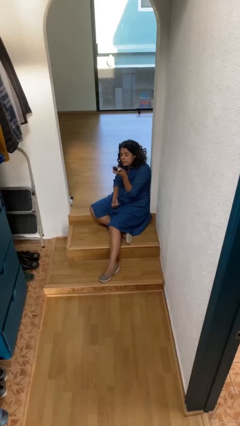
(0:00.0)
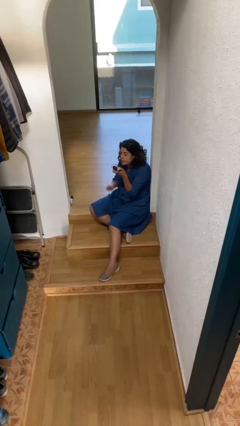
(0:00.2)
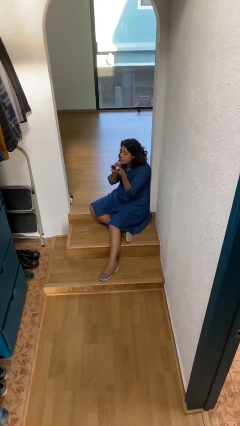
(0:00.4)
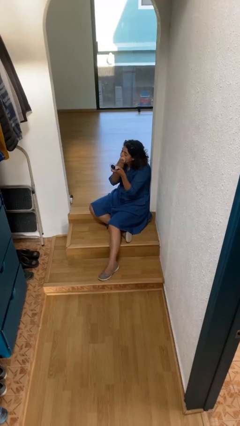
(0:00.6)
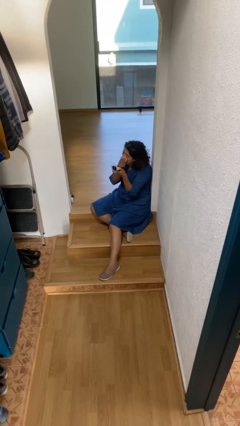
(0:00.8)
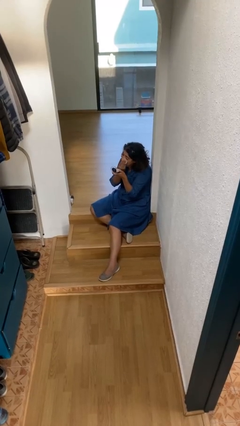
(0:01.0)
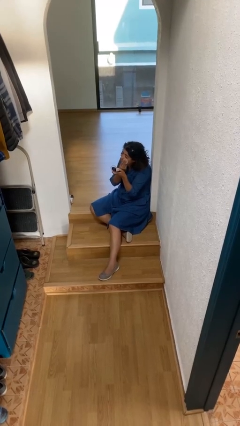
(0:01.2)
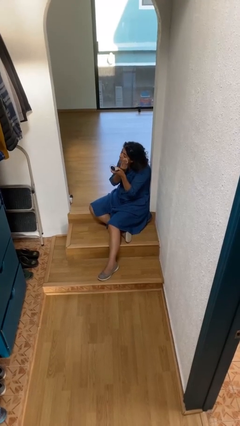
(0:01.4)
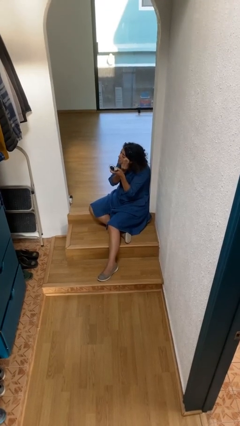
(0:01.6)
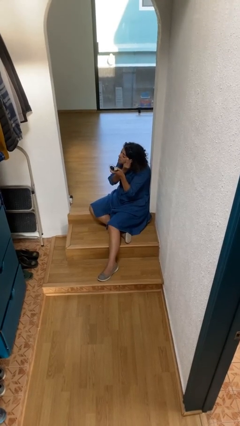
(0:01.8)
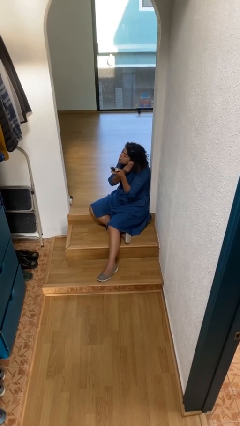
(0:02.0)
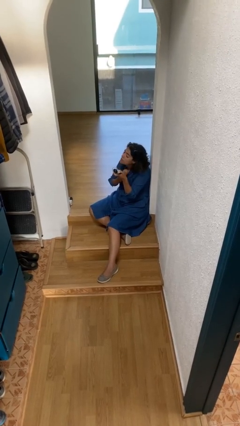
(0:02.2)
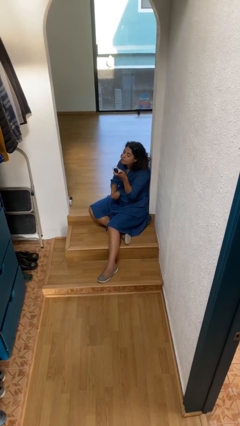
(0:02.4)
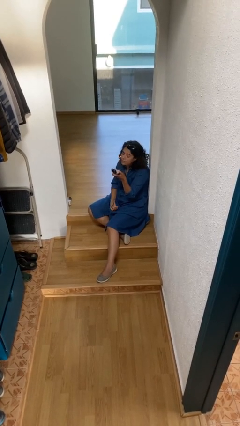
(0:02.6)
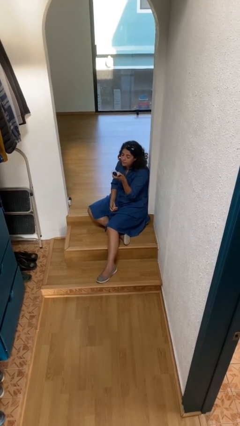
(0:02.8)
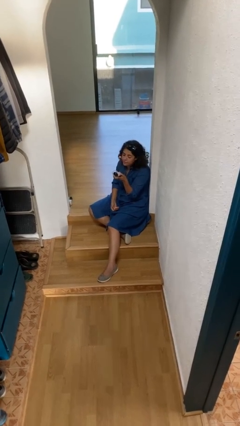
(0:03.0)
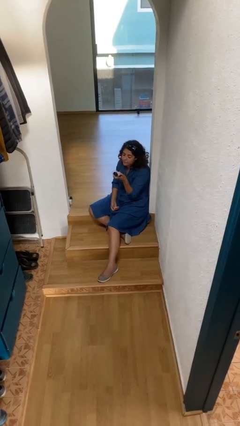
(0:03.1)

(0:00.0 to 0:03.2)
person applies foundation makeup

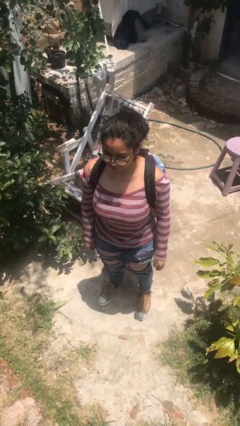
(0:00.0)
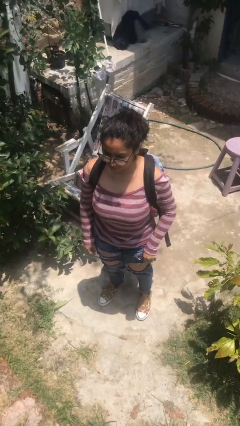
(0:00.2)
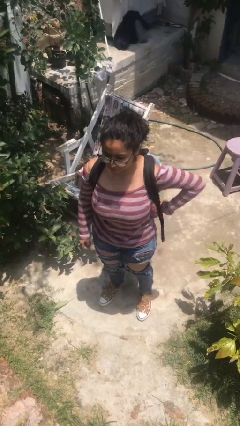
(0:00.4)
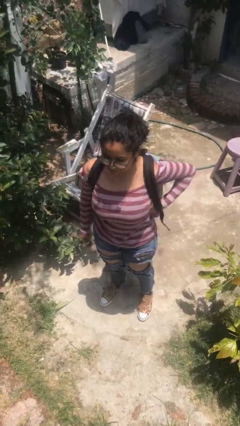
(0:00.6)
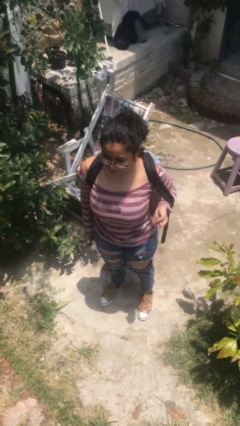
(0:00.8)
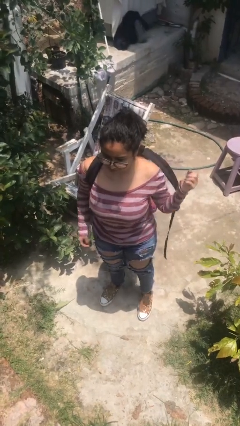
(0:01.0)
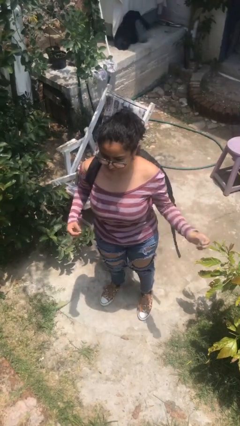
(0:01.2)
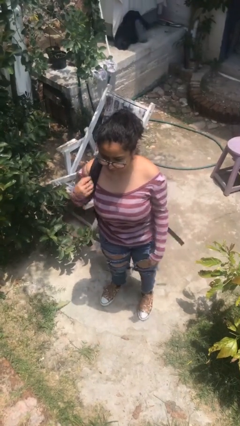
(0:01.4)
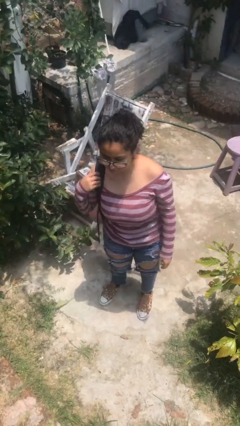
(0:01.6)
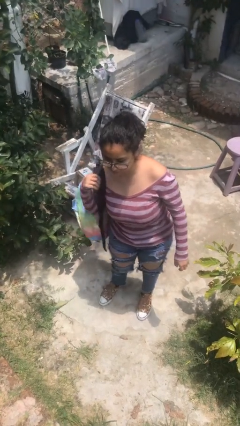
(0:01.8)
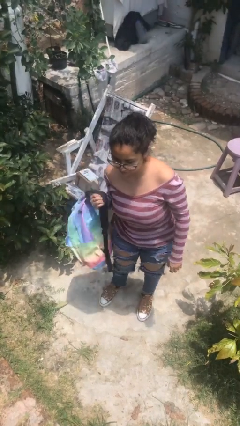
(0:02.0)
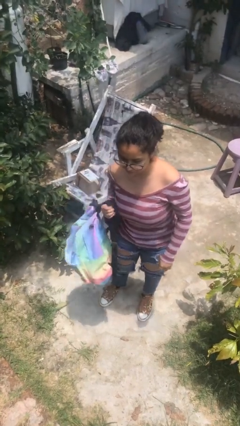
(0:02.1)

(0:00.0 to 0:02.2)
person takes off backpack

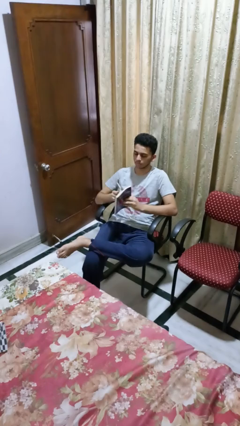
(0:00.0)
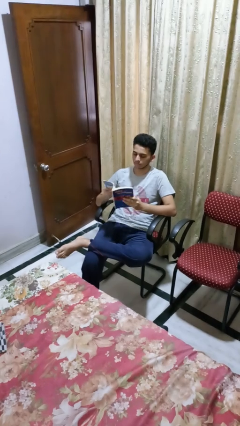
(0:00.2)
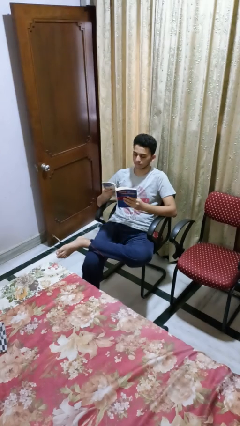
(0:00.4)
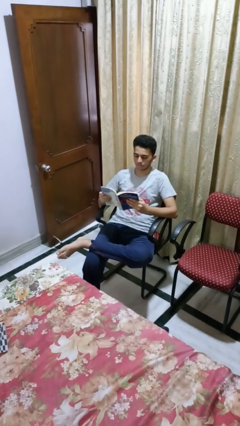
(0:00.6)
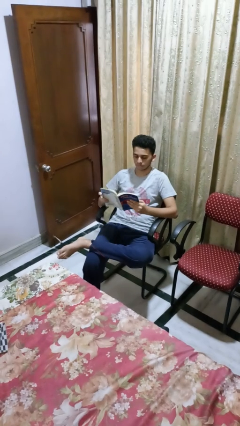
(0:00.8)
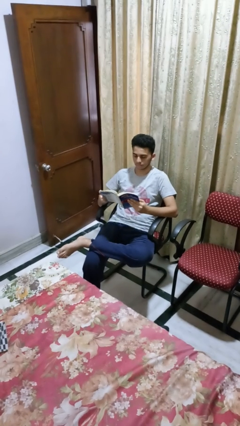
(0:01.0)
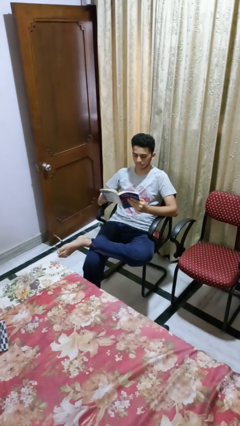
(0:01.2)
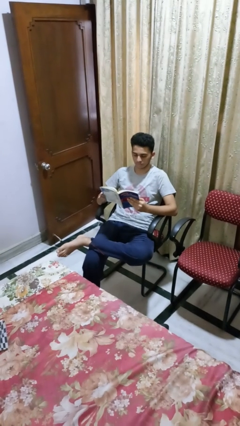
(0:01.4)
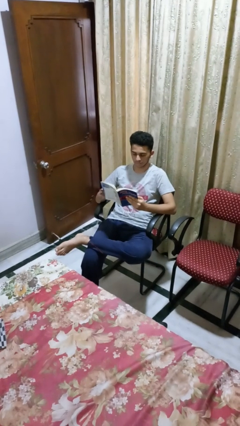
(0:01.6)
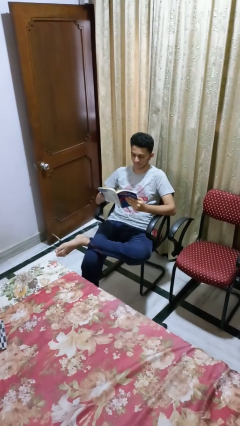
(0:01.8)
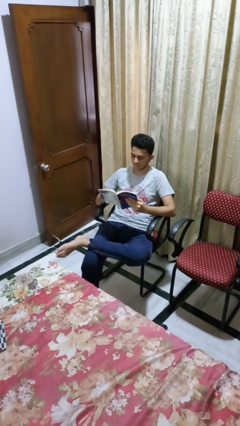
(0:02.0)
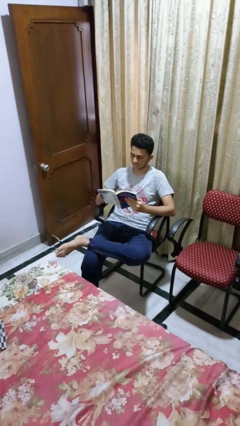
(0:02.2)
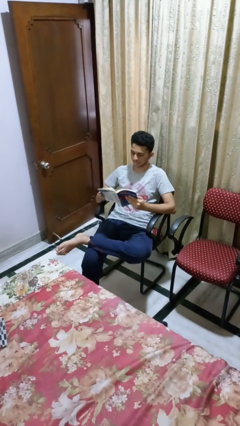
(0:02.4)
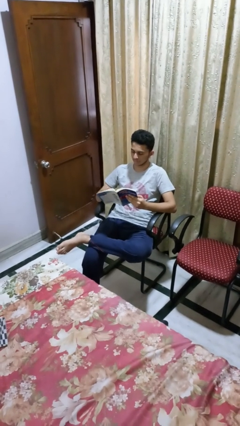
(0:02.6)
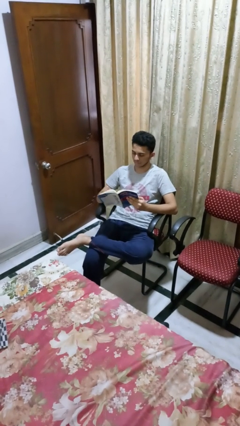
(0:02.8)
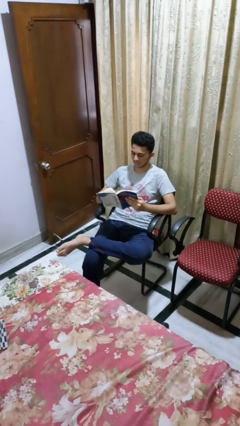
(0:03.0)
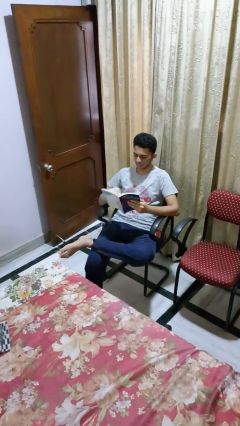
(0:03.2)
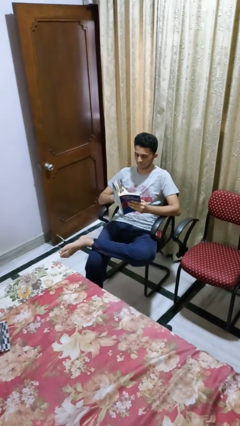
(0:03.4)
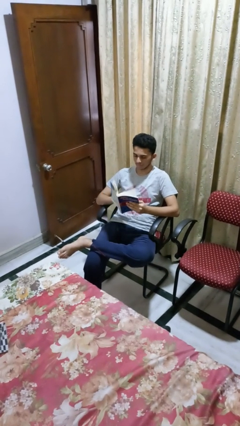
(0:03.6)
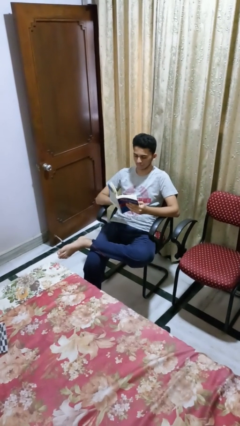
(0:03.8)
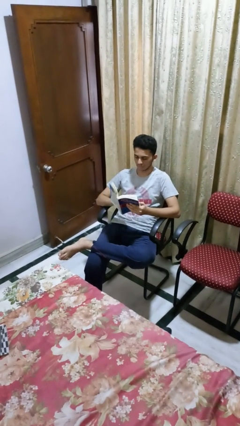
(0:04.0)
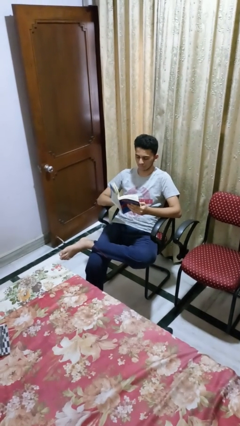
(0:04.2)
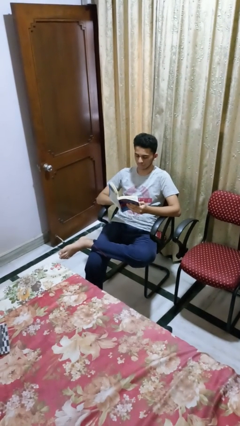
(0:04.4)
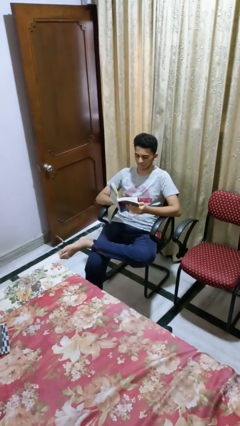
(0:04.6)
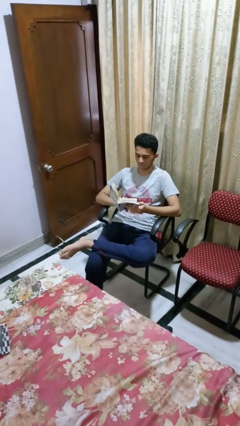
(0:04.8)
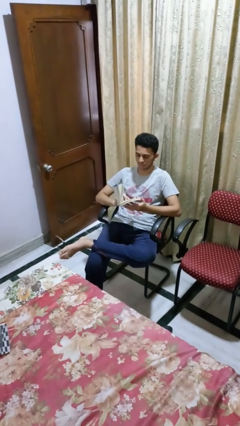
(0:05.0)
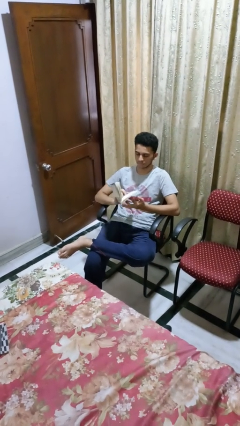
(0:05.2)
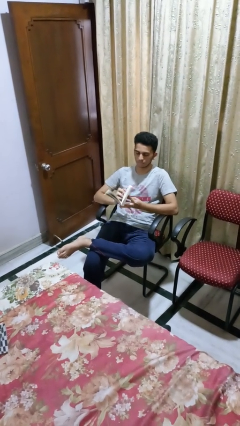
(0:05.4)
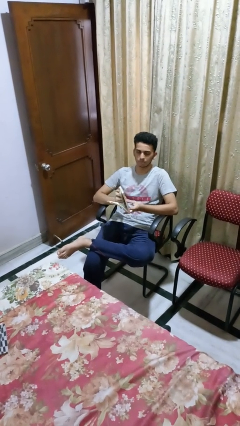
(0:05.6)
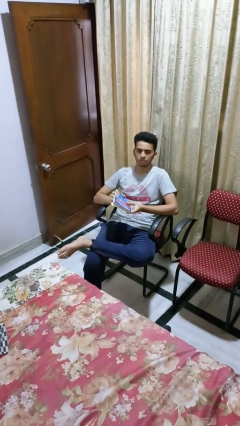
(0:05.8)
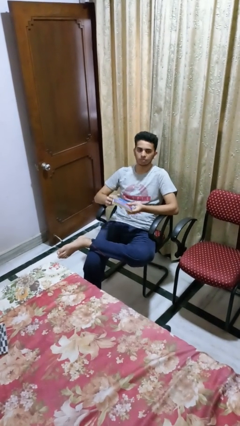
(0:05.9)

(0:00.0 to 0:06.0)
person reads book

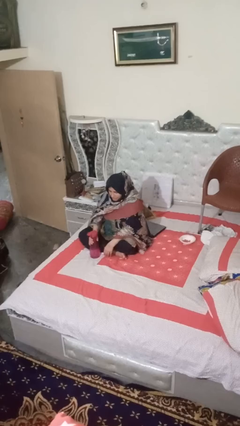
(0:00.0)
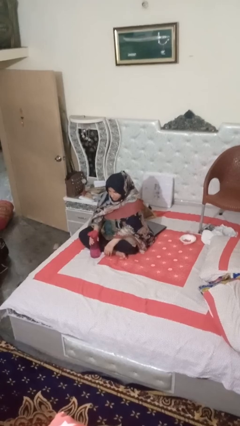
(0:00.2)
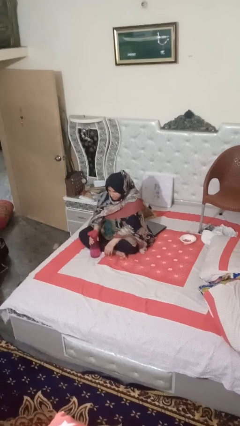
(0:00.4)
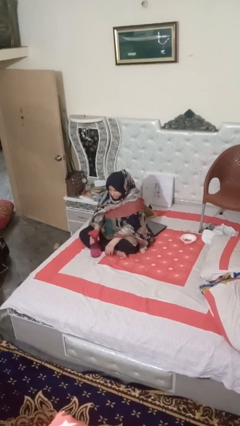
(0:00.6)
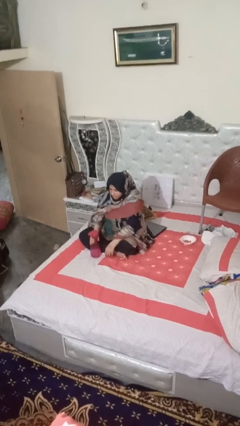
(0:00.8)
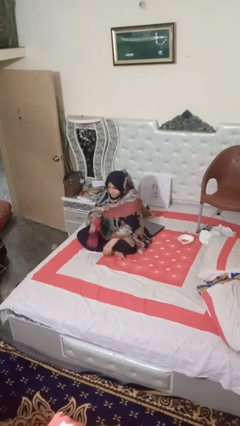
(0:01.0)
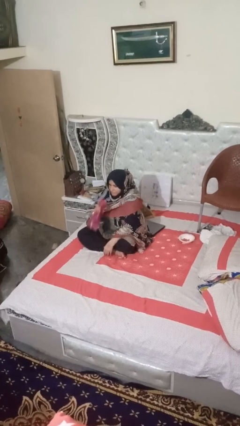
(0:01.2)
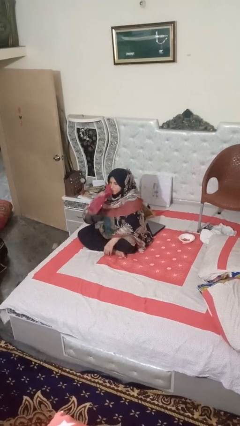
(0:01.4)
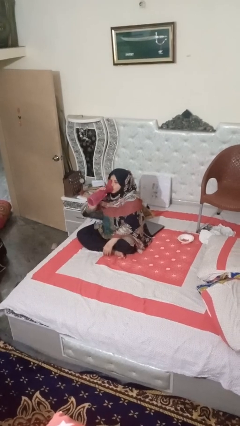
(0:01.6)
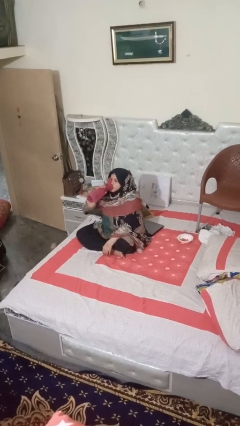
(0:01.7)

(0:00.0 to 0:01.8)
person drinks from bottle

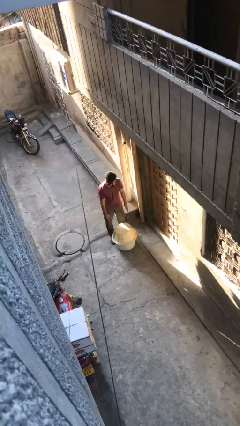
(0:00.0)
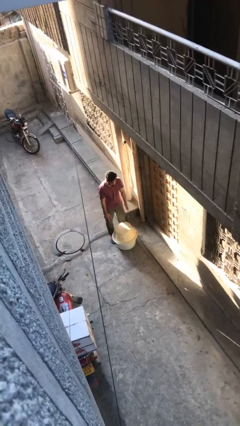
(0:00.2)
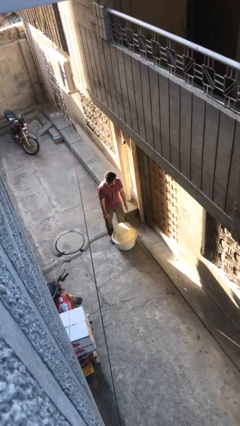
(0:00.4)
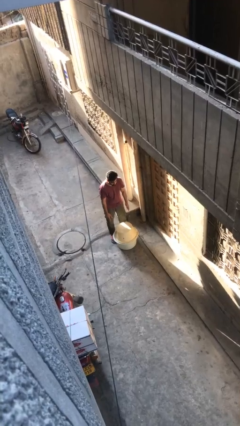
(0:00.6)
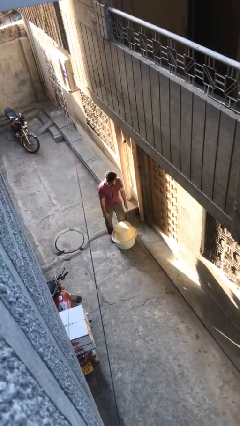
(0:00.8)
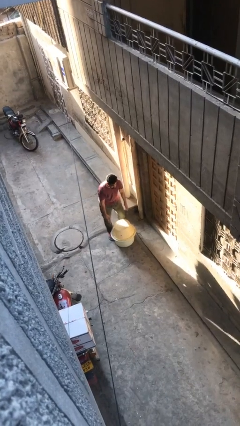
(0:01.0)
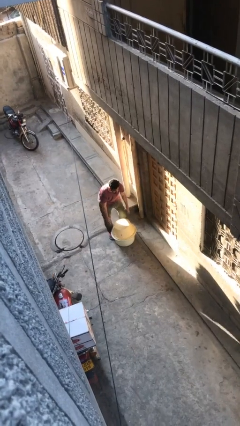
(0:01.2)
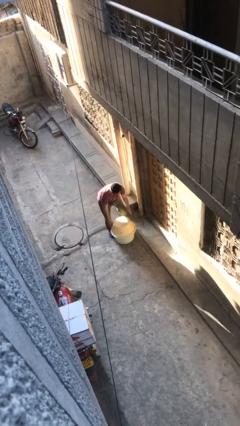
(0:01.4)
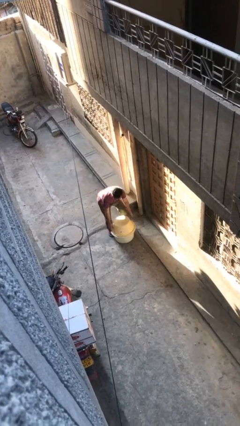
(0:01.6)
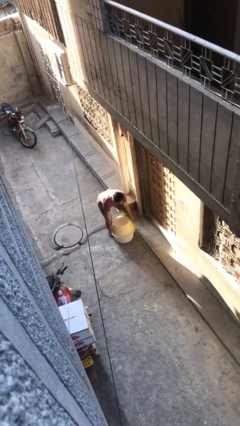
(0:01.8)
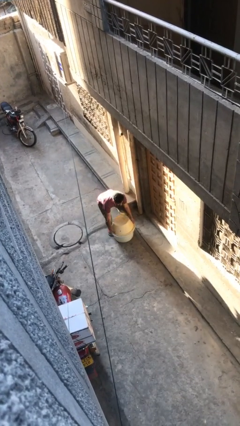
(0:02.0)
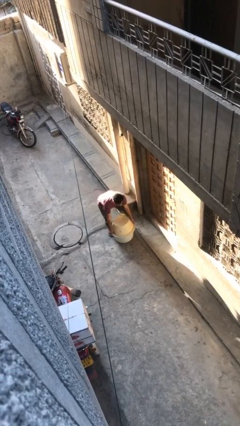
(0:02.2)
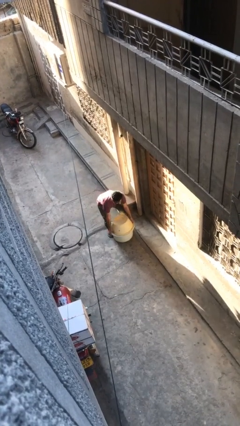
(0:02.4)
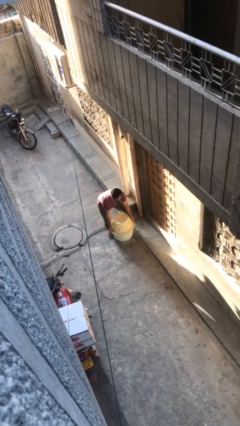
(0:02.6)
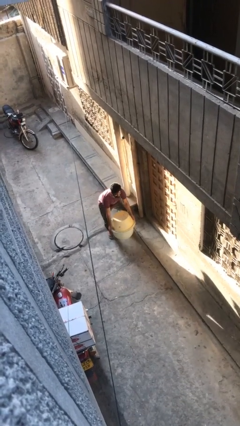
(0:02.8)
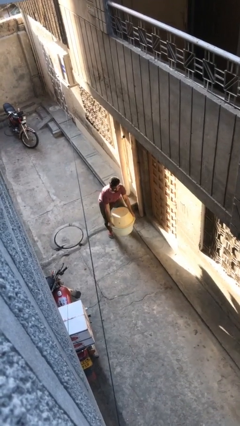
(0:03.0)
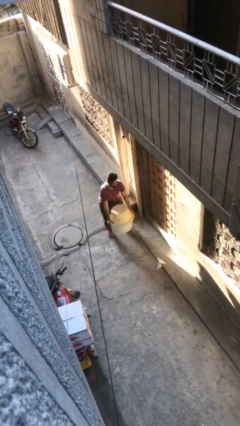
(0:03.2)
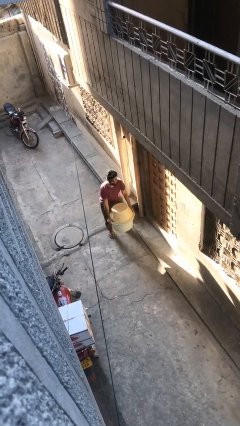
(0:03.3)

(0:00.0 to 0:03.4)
person picks up object from floor

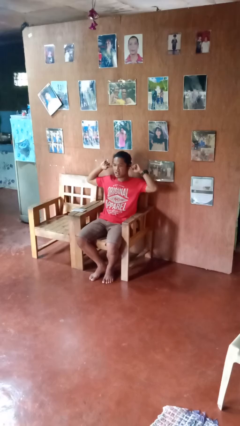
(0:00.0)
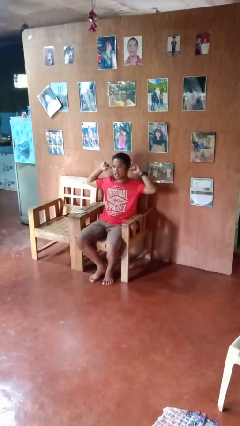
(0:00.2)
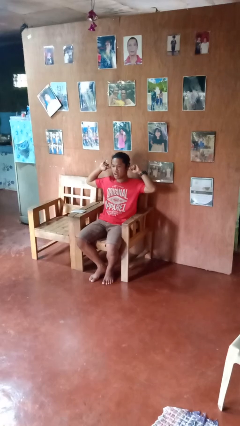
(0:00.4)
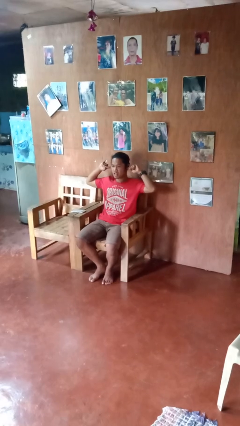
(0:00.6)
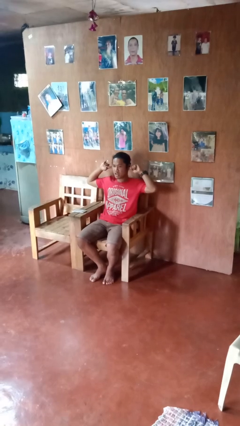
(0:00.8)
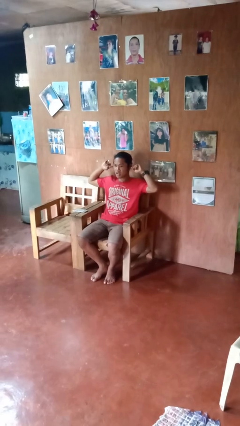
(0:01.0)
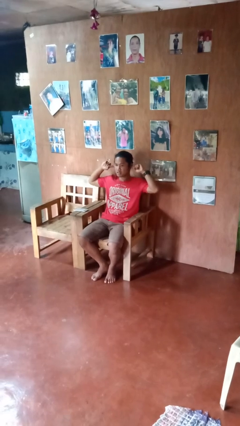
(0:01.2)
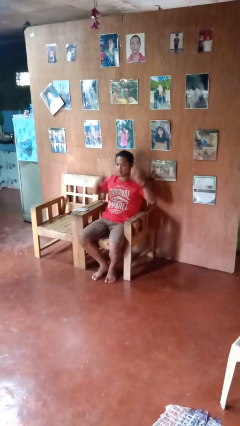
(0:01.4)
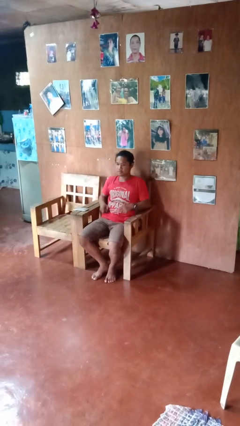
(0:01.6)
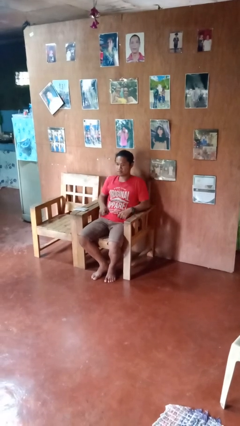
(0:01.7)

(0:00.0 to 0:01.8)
person puts fingers in ear
